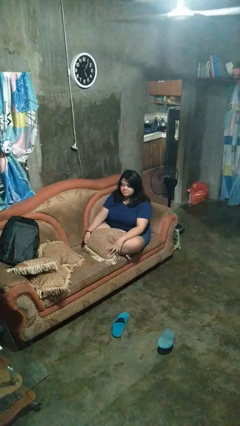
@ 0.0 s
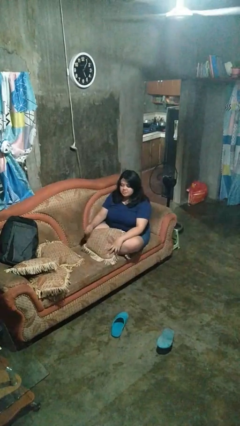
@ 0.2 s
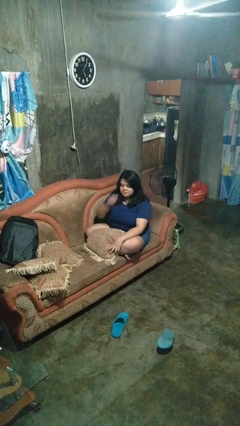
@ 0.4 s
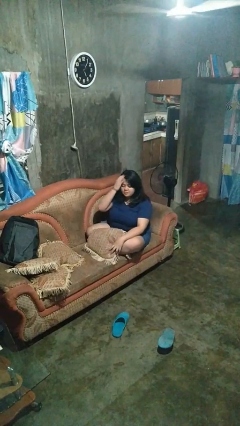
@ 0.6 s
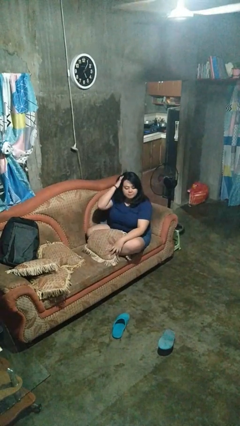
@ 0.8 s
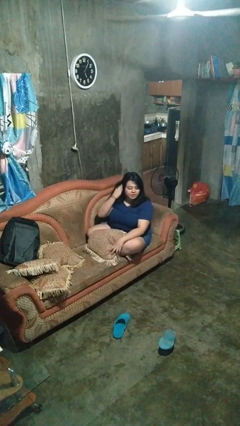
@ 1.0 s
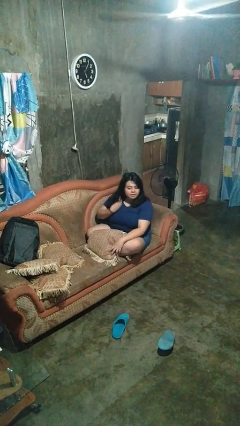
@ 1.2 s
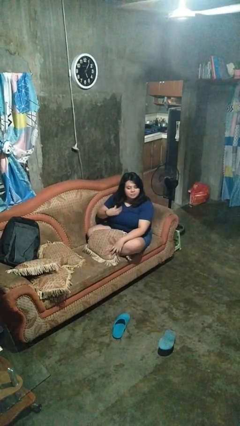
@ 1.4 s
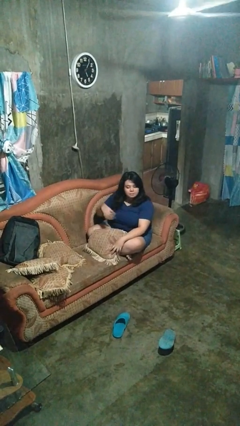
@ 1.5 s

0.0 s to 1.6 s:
person strokes hair

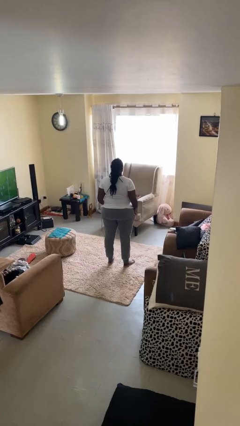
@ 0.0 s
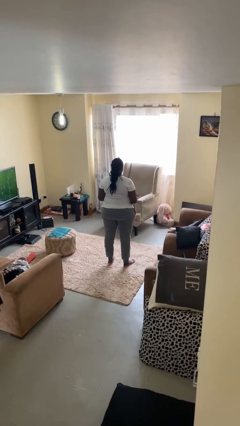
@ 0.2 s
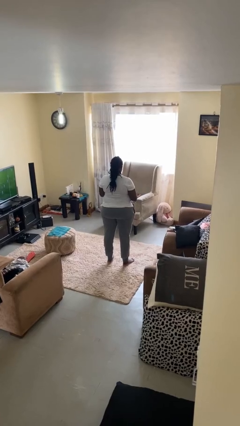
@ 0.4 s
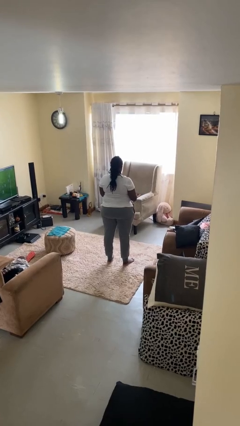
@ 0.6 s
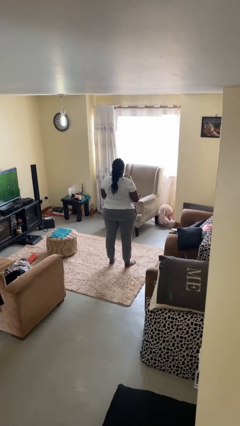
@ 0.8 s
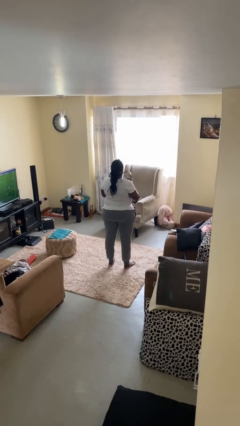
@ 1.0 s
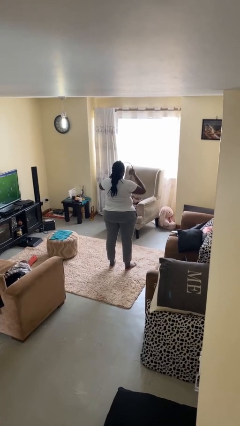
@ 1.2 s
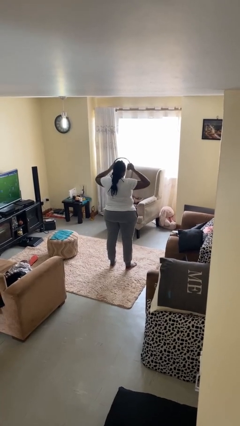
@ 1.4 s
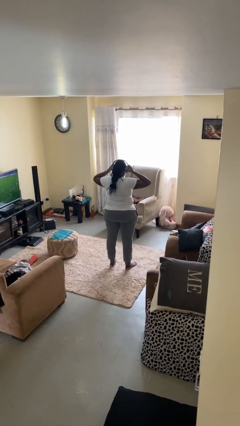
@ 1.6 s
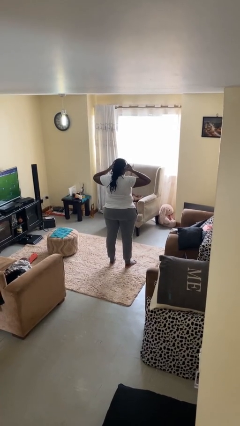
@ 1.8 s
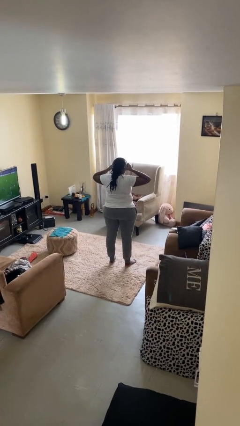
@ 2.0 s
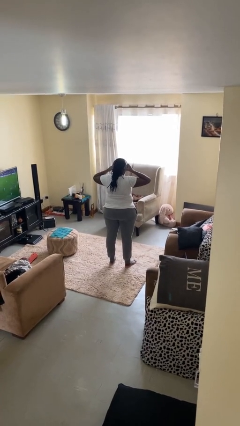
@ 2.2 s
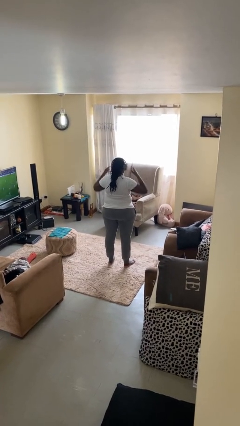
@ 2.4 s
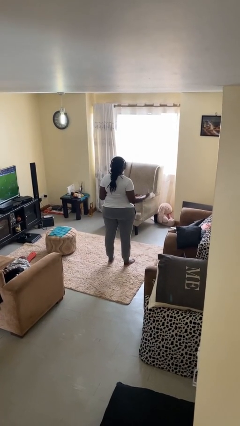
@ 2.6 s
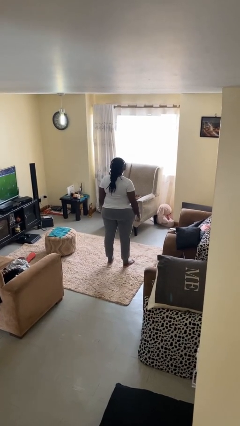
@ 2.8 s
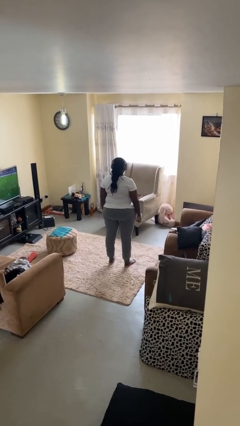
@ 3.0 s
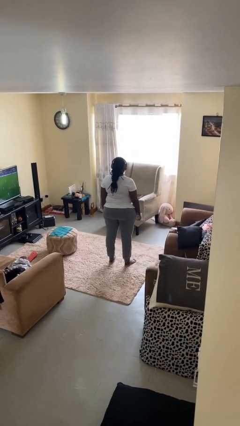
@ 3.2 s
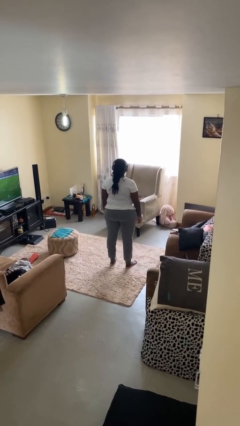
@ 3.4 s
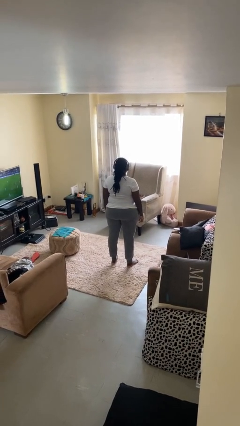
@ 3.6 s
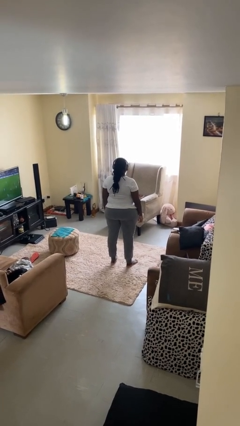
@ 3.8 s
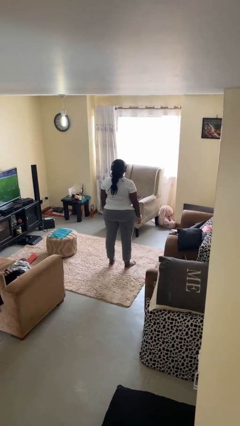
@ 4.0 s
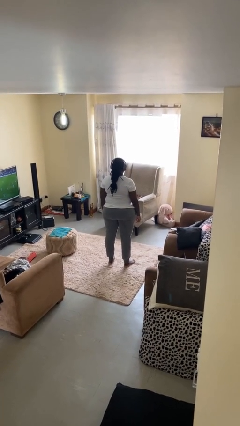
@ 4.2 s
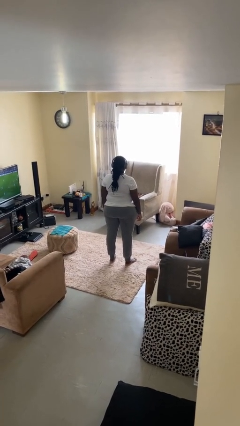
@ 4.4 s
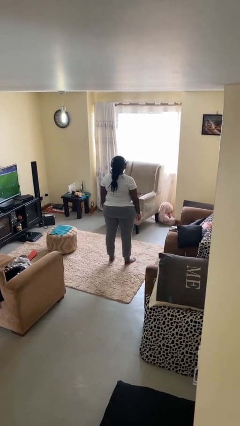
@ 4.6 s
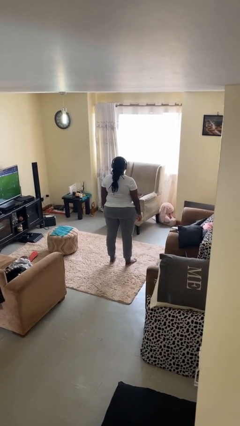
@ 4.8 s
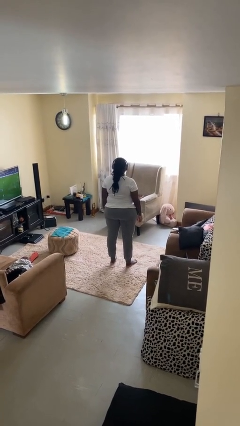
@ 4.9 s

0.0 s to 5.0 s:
person puts on headphones

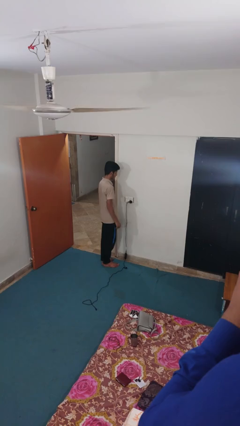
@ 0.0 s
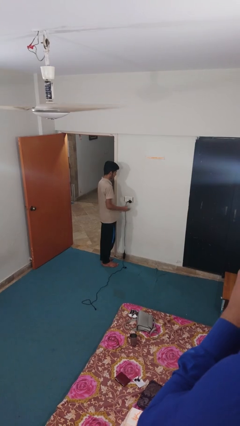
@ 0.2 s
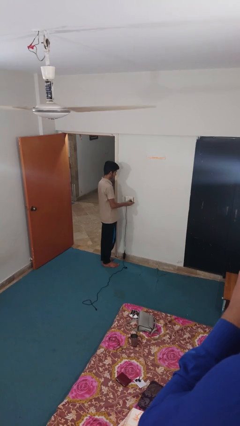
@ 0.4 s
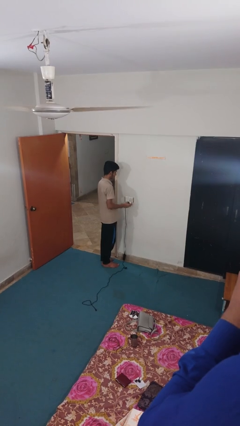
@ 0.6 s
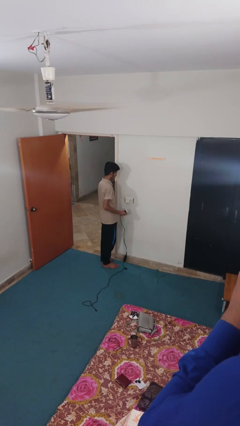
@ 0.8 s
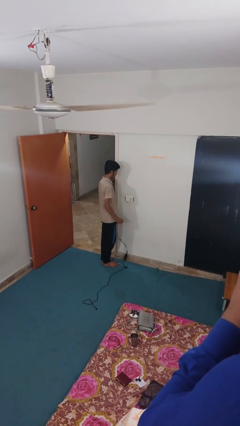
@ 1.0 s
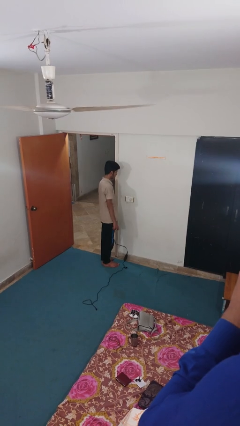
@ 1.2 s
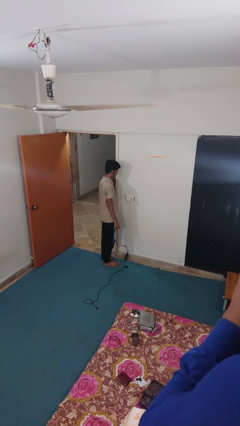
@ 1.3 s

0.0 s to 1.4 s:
person unplugs from electrical socket

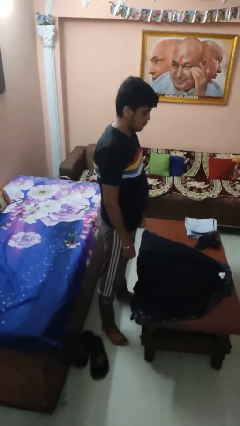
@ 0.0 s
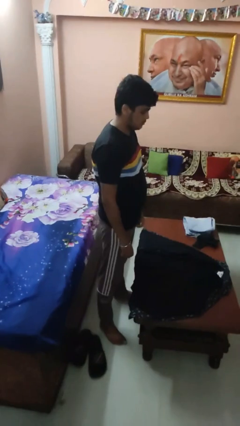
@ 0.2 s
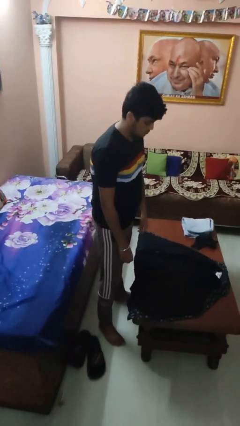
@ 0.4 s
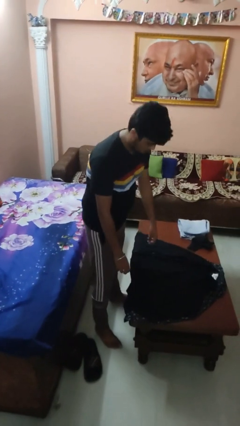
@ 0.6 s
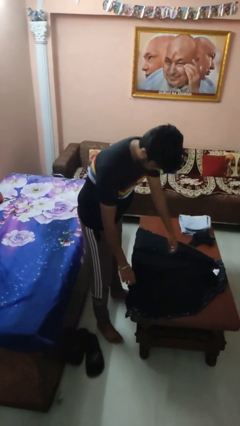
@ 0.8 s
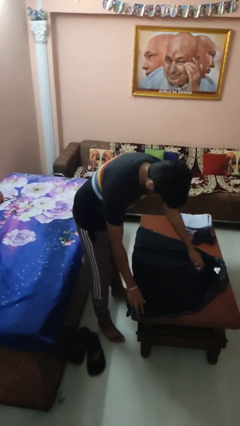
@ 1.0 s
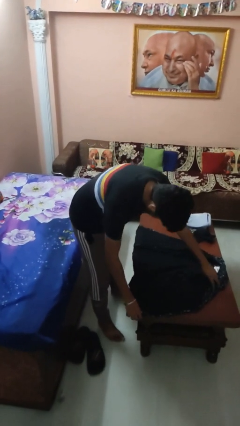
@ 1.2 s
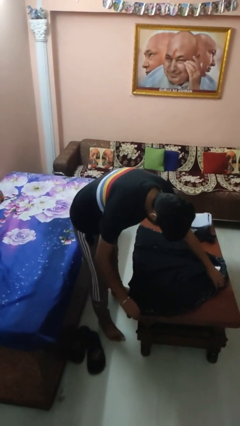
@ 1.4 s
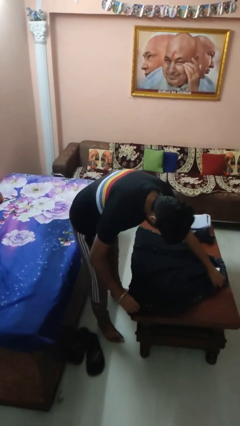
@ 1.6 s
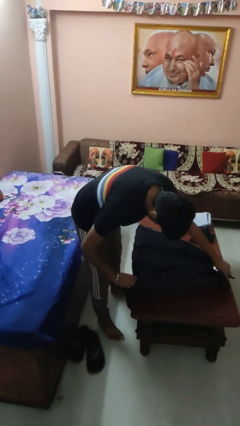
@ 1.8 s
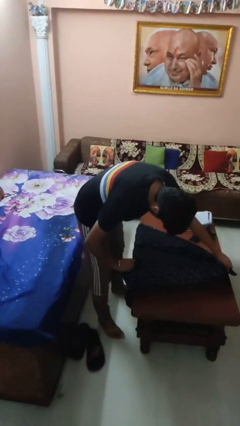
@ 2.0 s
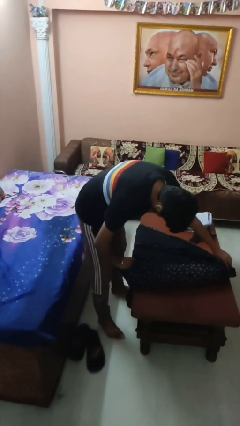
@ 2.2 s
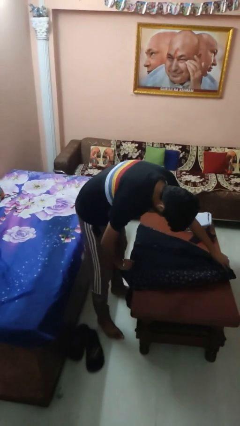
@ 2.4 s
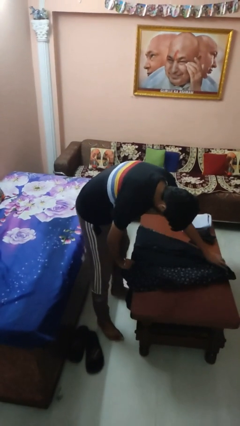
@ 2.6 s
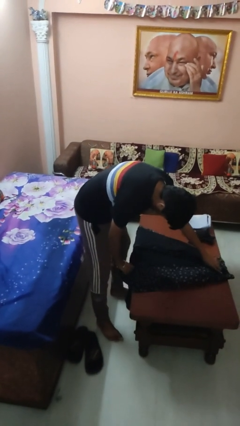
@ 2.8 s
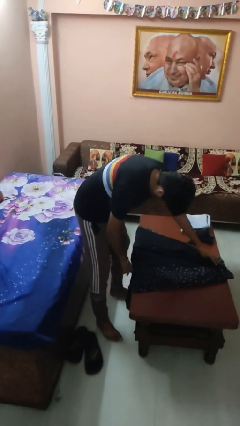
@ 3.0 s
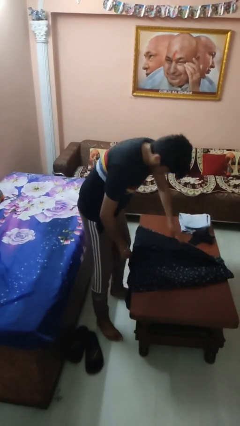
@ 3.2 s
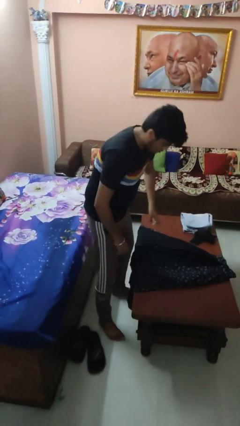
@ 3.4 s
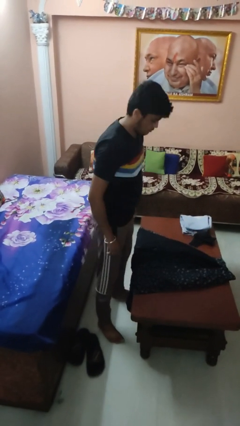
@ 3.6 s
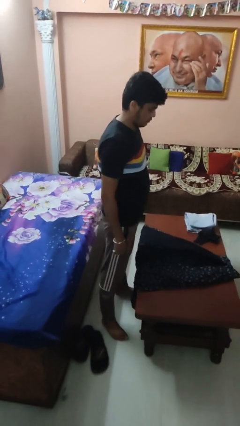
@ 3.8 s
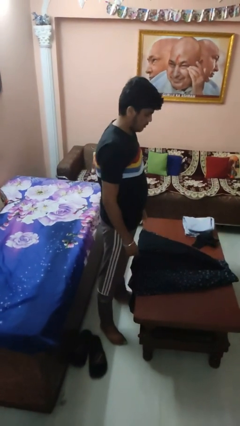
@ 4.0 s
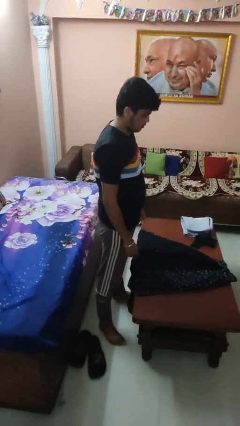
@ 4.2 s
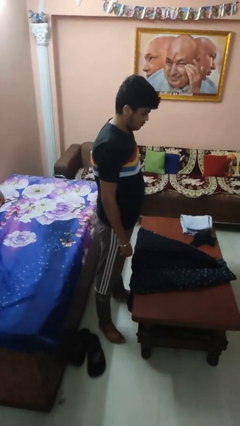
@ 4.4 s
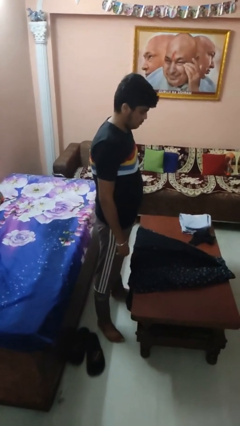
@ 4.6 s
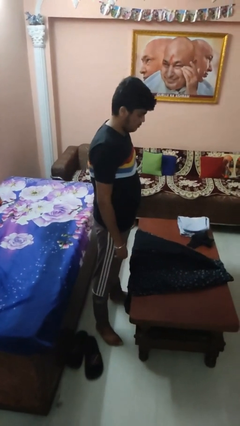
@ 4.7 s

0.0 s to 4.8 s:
person folds shirt

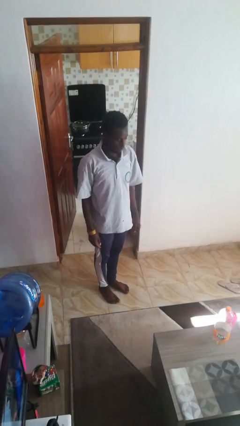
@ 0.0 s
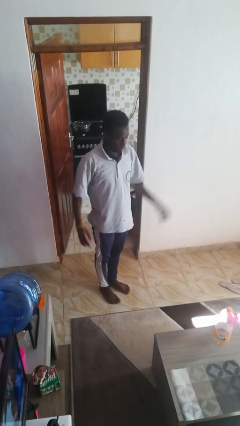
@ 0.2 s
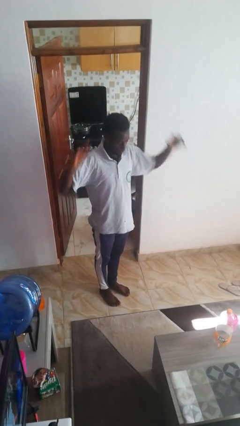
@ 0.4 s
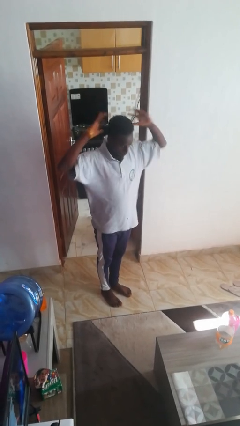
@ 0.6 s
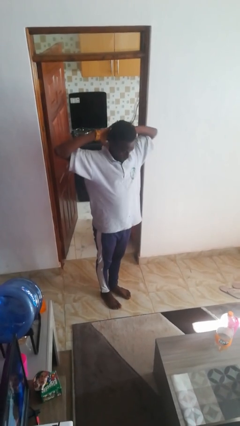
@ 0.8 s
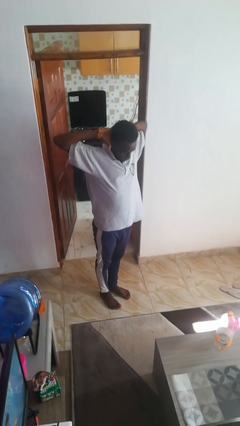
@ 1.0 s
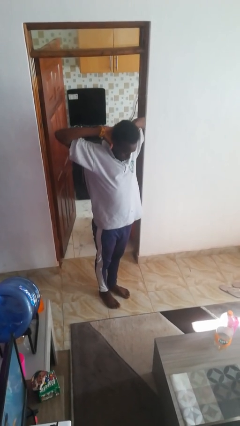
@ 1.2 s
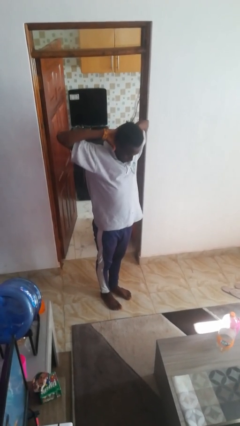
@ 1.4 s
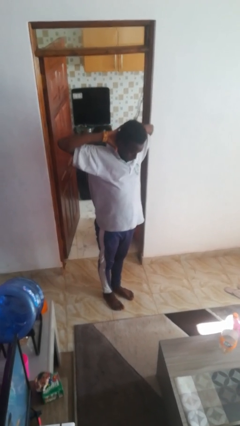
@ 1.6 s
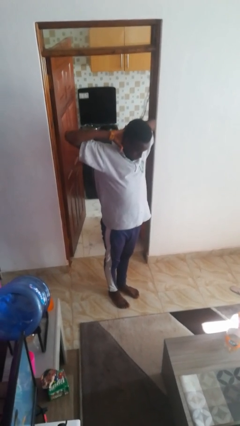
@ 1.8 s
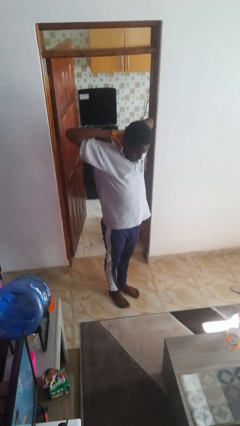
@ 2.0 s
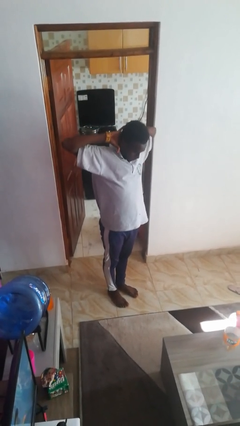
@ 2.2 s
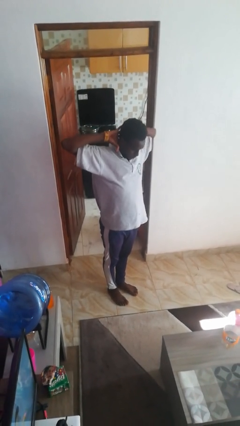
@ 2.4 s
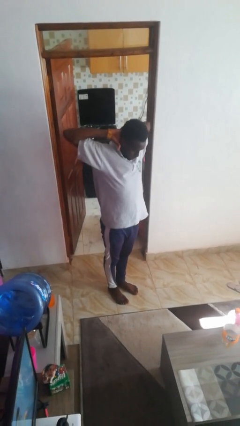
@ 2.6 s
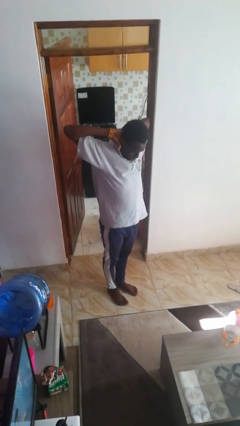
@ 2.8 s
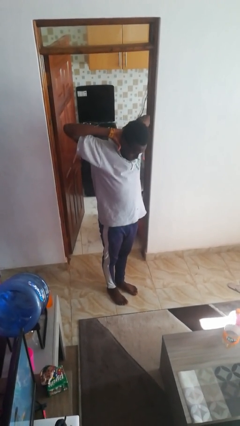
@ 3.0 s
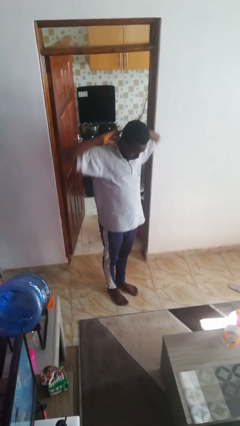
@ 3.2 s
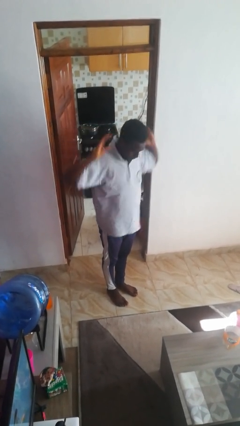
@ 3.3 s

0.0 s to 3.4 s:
person stretches arms over head

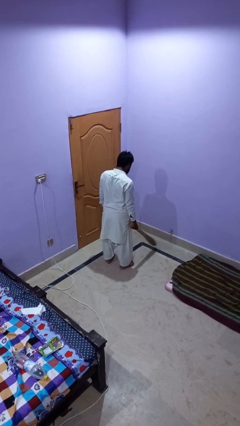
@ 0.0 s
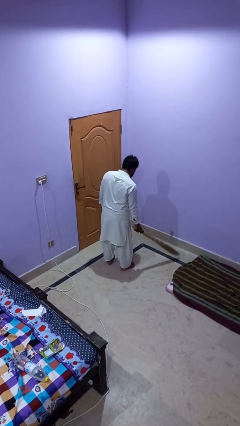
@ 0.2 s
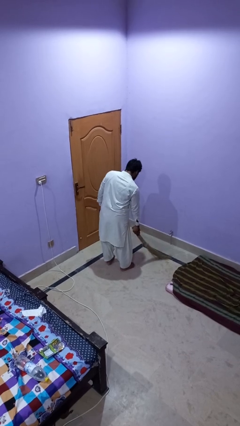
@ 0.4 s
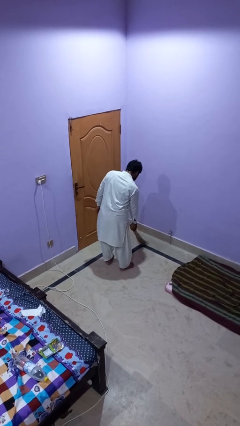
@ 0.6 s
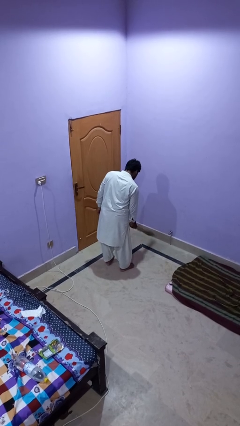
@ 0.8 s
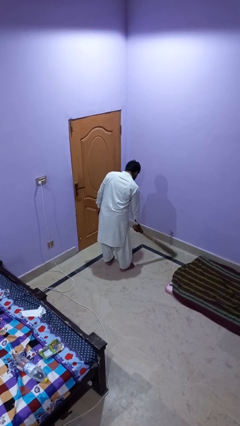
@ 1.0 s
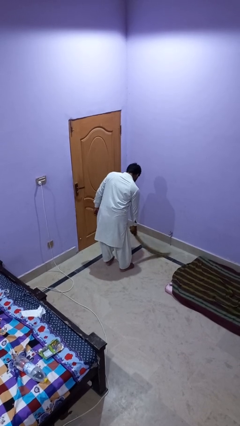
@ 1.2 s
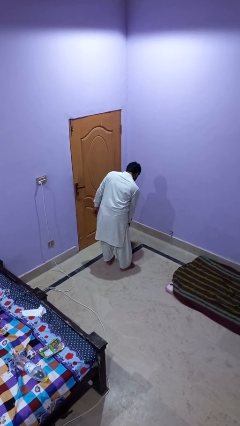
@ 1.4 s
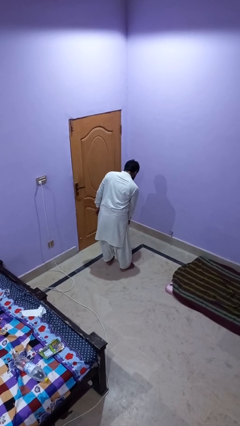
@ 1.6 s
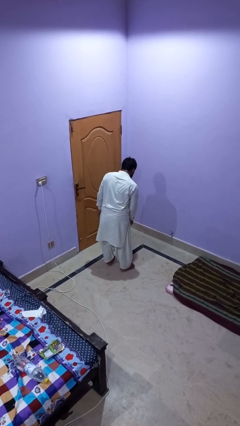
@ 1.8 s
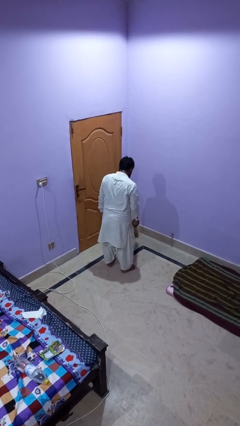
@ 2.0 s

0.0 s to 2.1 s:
person sweeps floor
